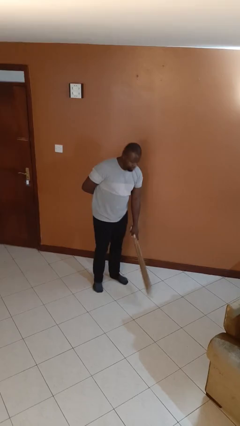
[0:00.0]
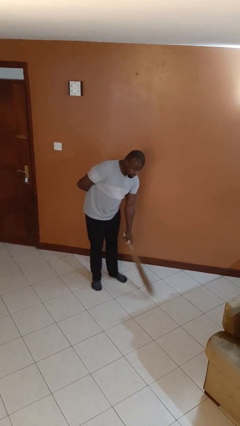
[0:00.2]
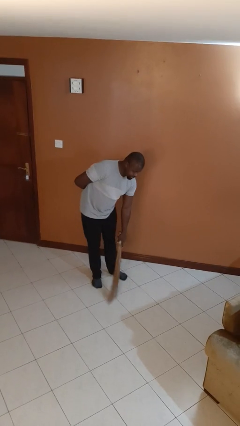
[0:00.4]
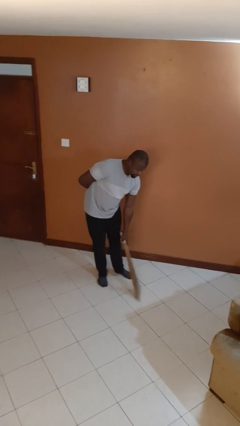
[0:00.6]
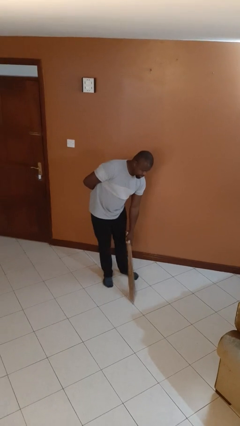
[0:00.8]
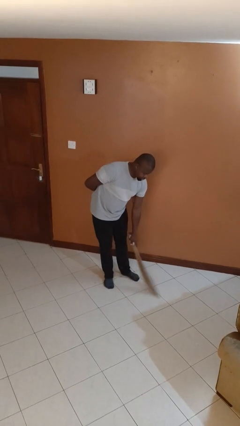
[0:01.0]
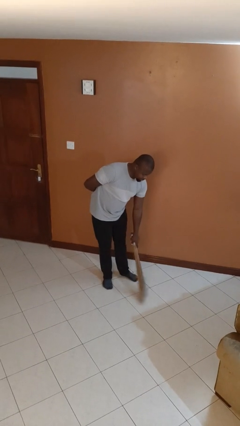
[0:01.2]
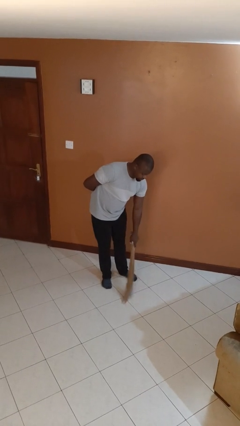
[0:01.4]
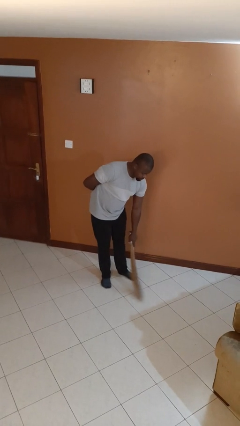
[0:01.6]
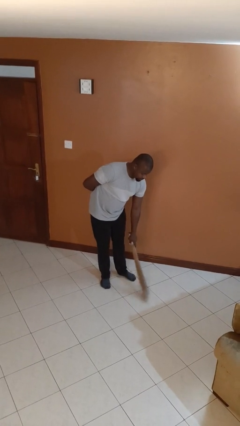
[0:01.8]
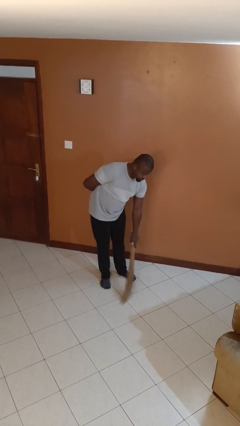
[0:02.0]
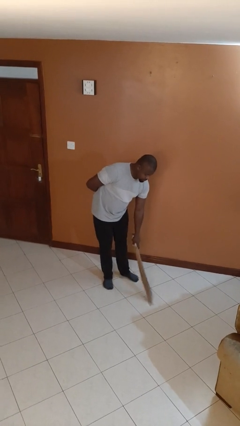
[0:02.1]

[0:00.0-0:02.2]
person sweeps floor

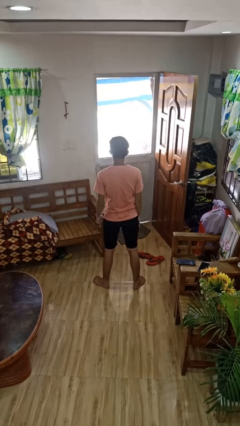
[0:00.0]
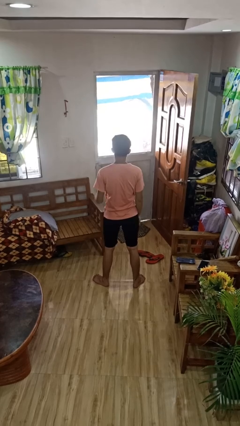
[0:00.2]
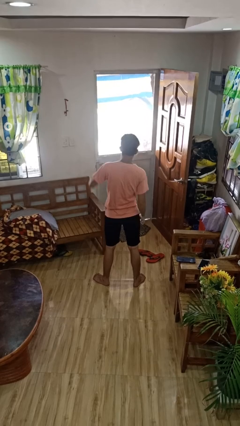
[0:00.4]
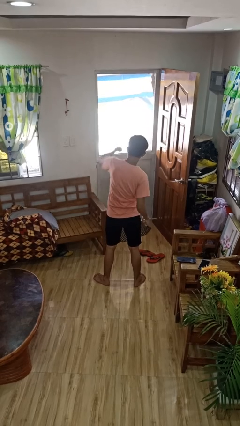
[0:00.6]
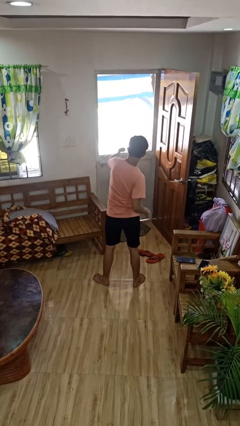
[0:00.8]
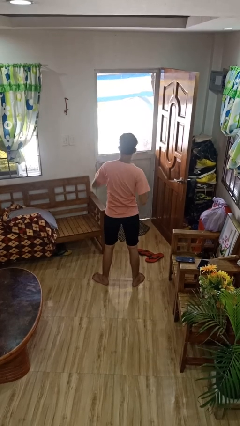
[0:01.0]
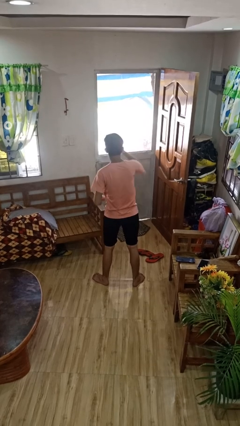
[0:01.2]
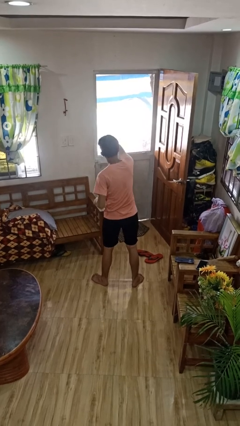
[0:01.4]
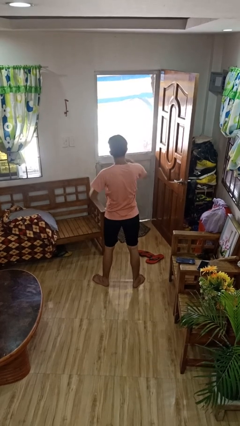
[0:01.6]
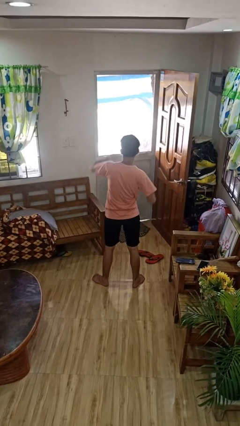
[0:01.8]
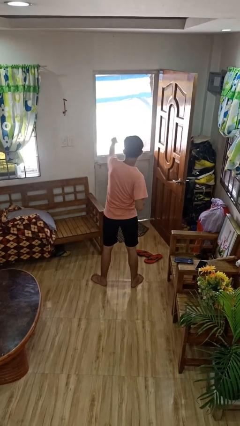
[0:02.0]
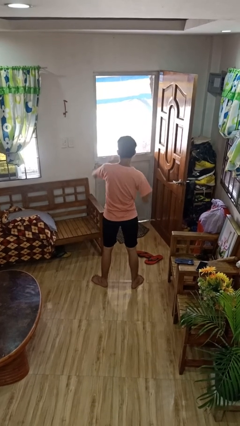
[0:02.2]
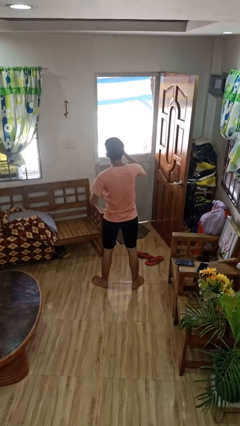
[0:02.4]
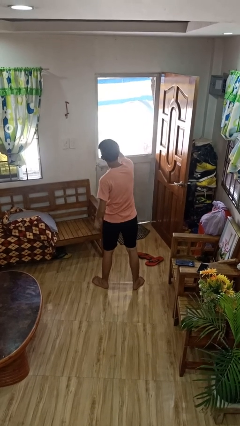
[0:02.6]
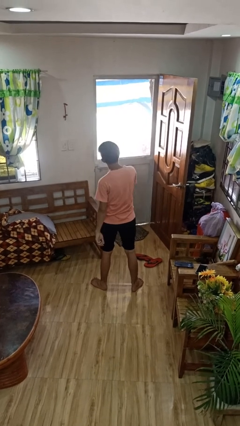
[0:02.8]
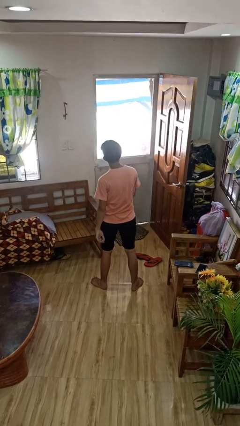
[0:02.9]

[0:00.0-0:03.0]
person punches

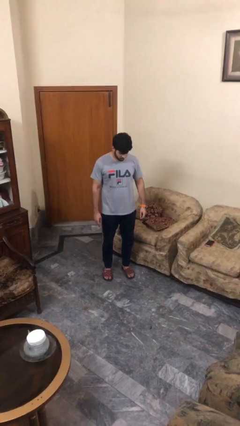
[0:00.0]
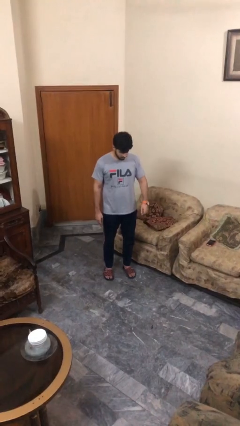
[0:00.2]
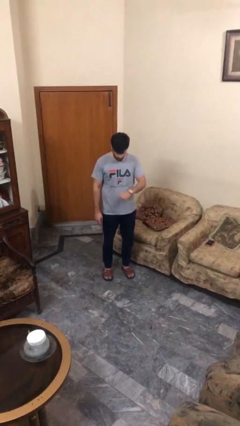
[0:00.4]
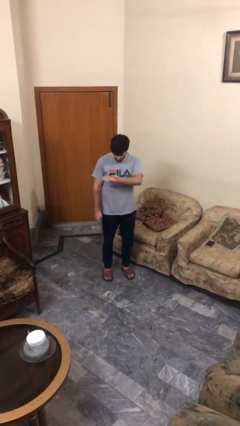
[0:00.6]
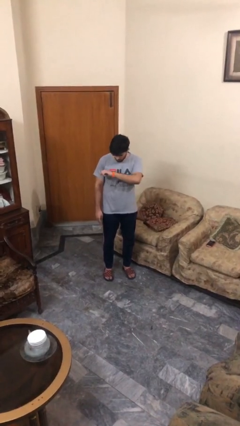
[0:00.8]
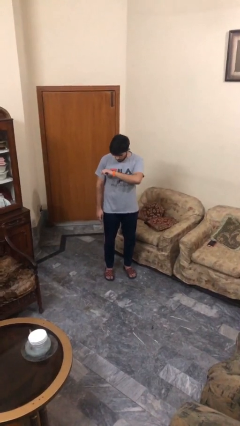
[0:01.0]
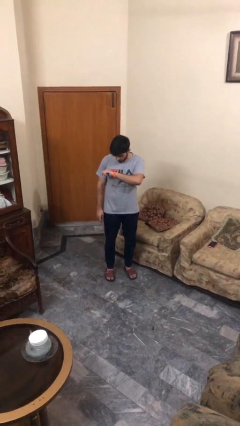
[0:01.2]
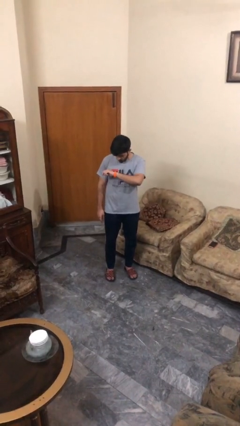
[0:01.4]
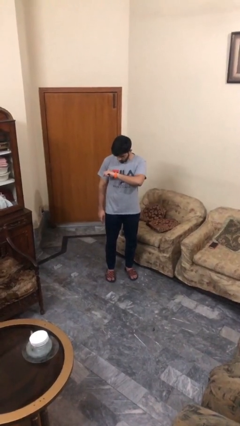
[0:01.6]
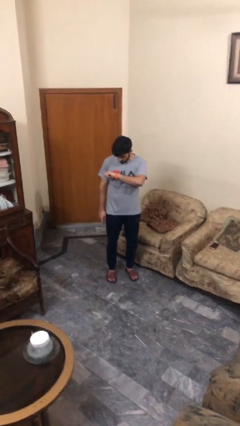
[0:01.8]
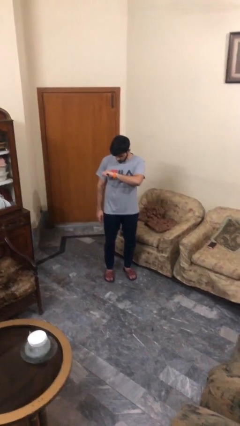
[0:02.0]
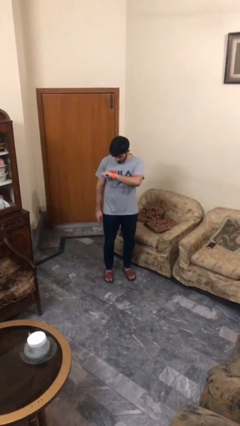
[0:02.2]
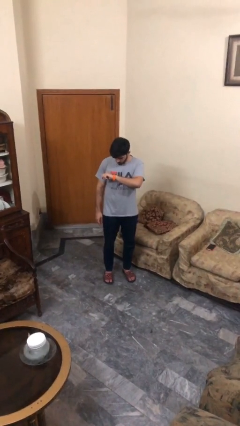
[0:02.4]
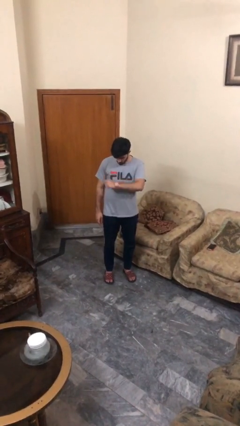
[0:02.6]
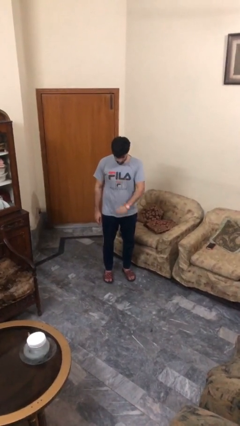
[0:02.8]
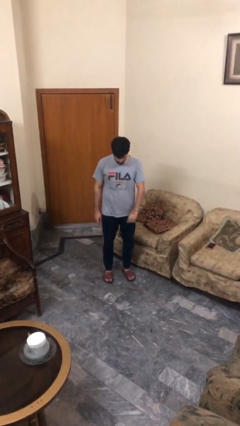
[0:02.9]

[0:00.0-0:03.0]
person looks at wristwatch

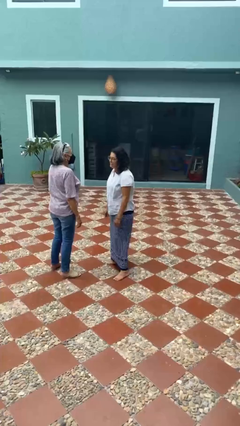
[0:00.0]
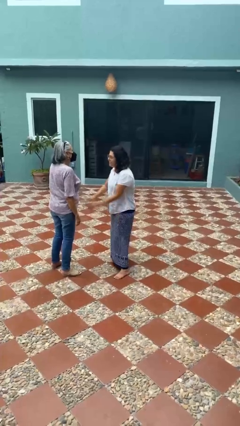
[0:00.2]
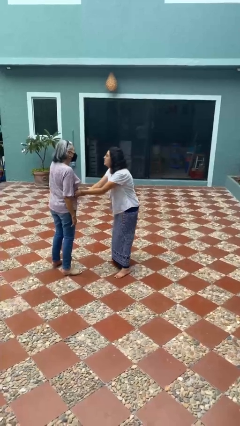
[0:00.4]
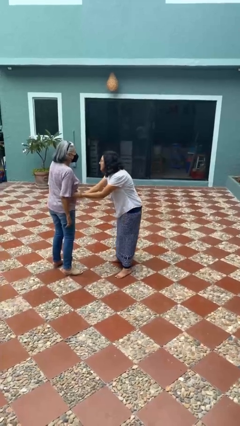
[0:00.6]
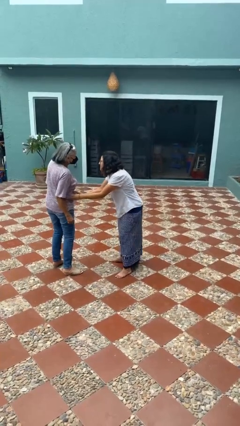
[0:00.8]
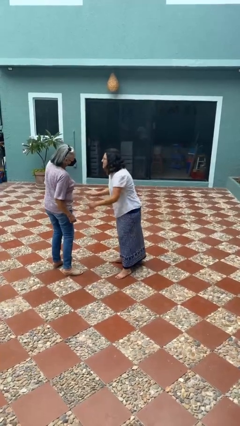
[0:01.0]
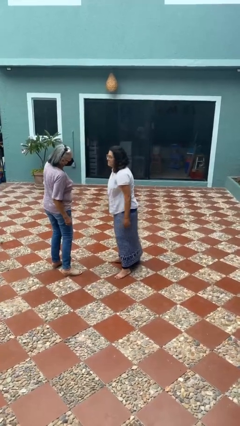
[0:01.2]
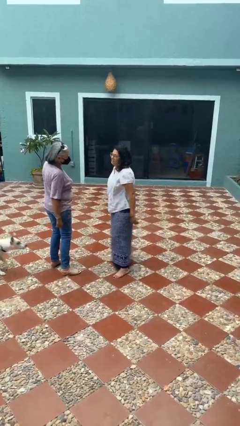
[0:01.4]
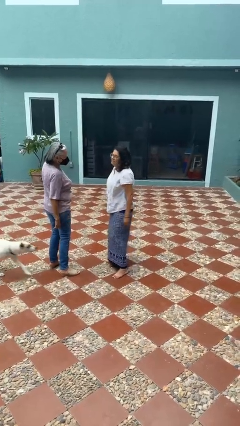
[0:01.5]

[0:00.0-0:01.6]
person tickles person

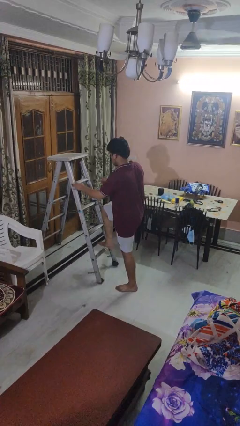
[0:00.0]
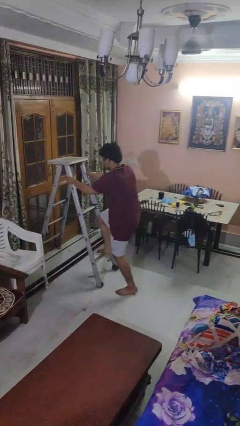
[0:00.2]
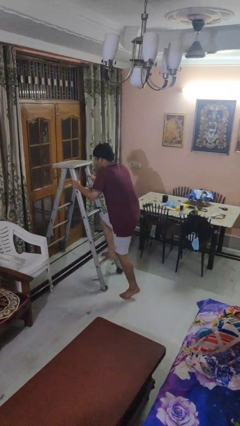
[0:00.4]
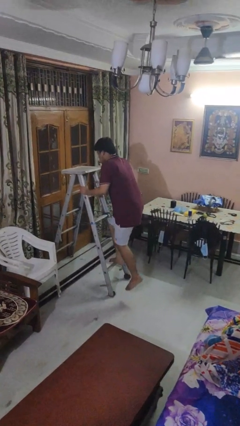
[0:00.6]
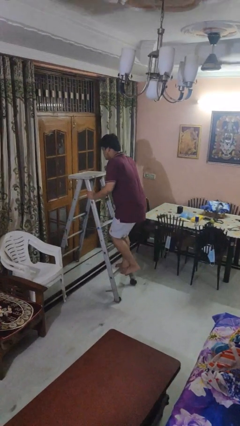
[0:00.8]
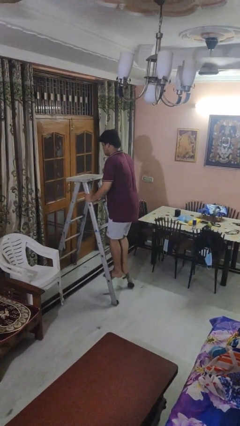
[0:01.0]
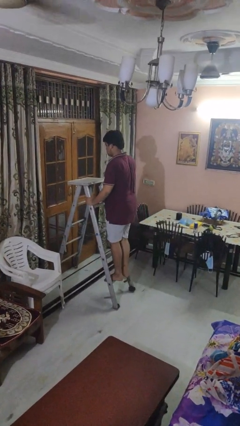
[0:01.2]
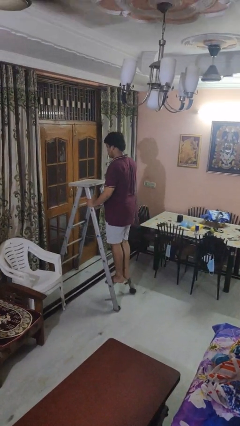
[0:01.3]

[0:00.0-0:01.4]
person climbs up ladder

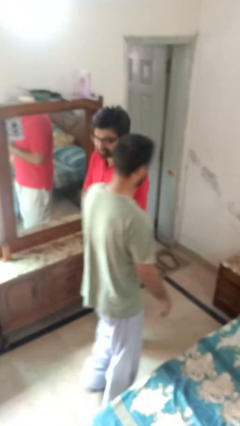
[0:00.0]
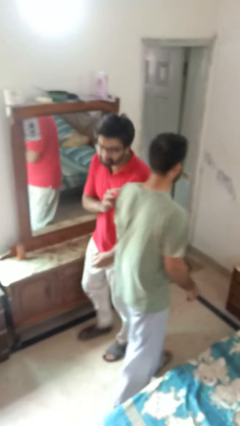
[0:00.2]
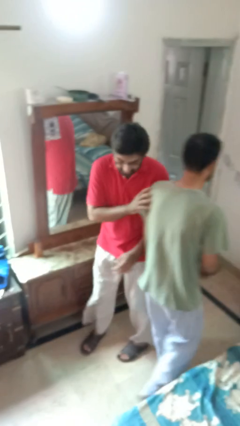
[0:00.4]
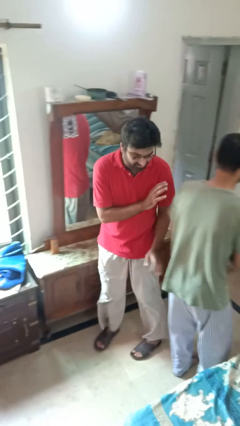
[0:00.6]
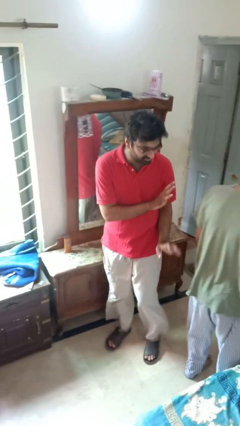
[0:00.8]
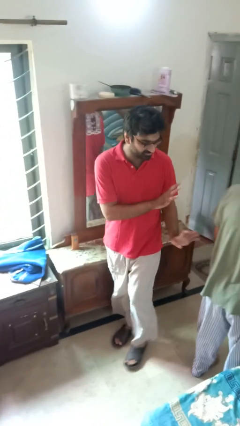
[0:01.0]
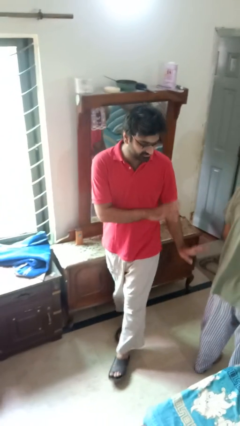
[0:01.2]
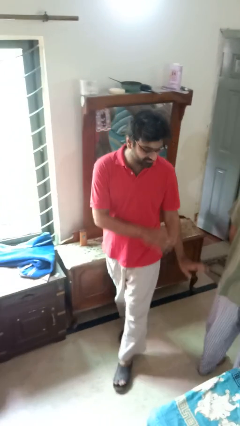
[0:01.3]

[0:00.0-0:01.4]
person bumps into person

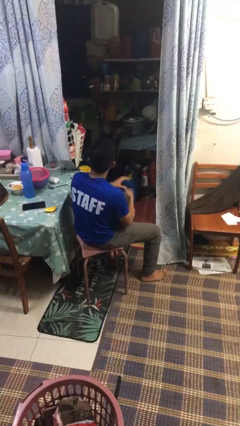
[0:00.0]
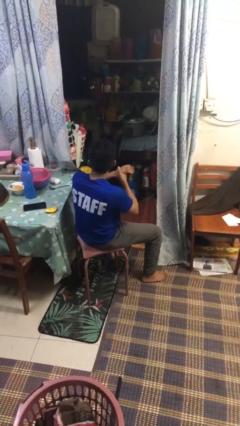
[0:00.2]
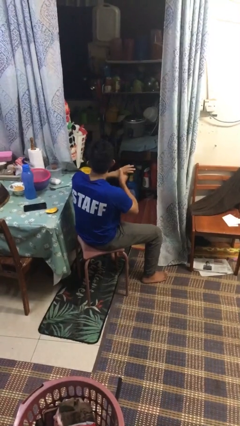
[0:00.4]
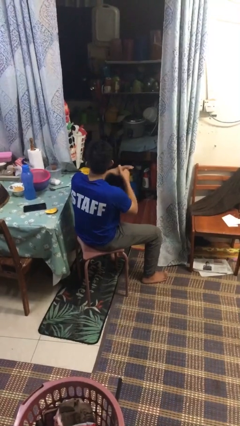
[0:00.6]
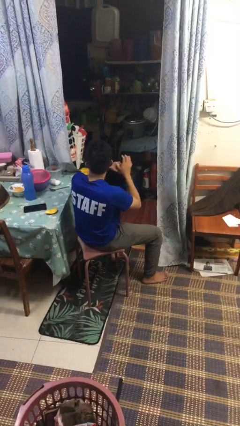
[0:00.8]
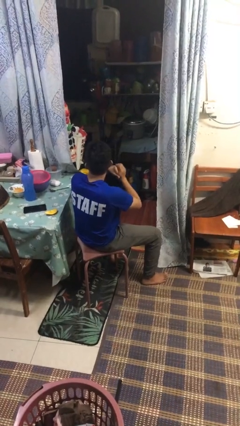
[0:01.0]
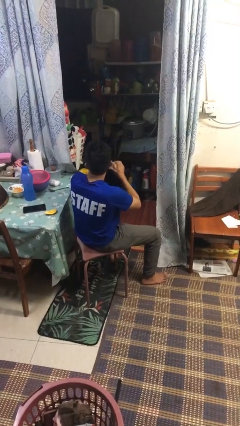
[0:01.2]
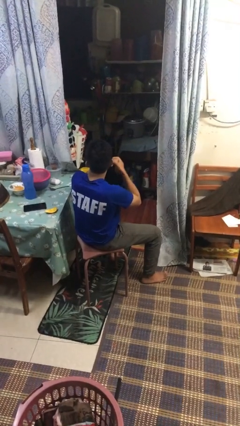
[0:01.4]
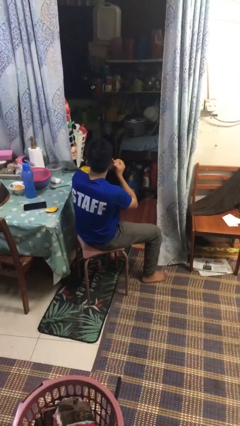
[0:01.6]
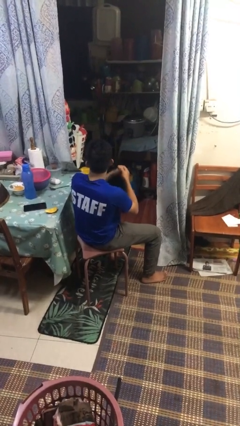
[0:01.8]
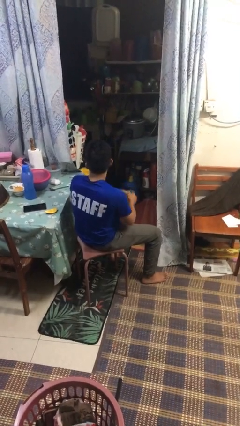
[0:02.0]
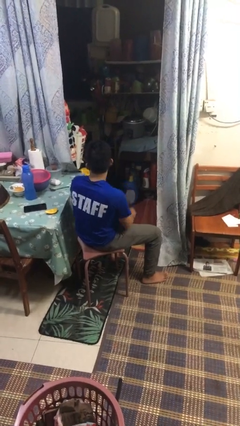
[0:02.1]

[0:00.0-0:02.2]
person cracks knuckles

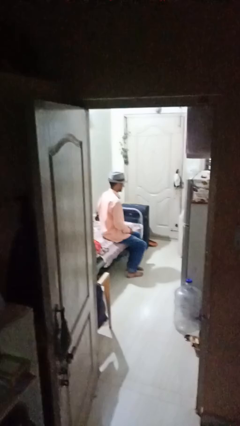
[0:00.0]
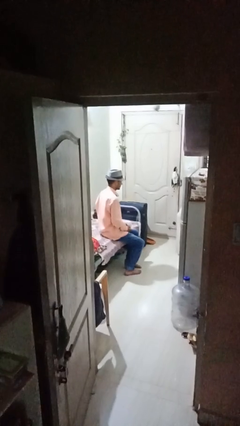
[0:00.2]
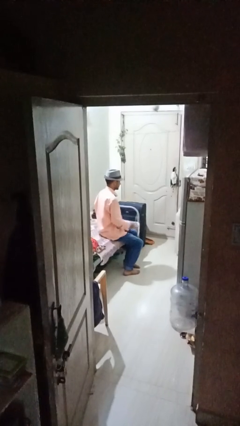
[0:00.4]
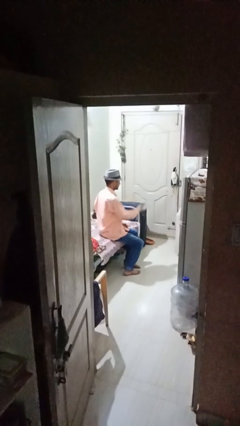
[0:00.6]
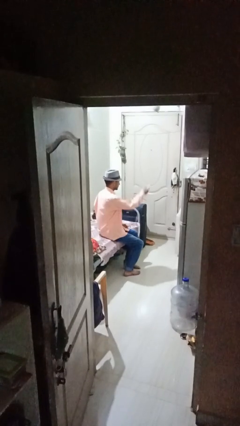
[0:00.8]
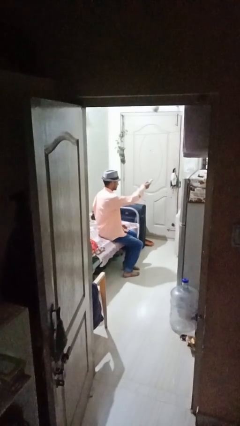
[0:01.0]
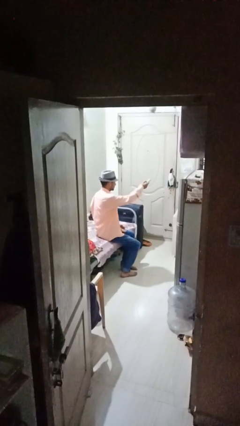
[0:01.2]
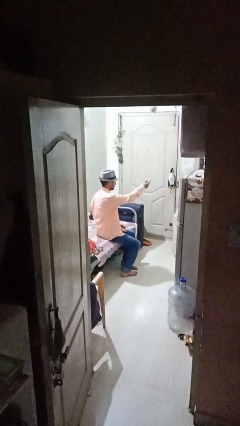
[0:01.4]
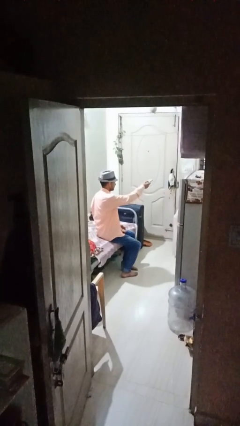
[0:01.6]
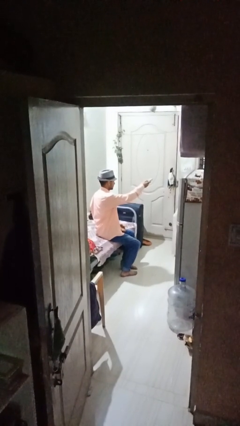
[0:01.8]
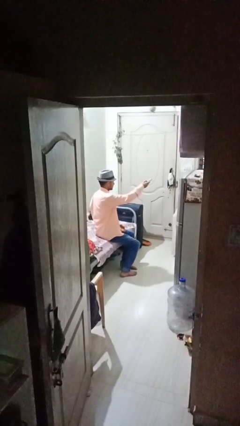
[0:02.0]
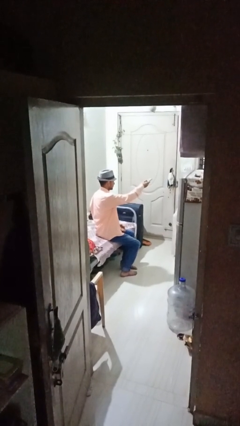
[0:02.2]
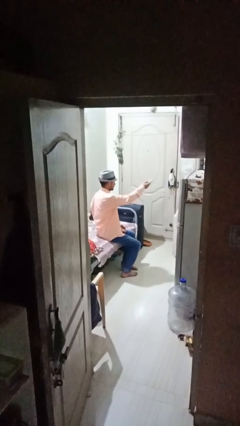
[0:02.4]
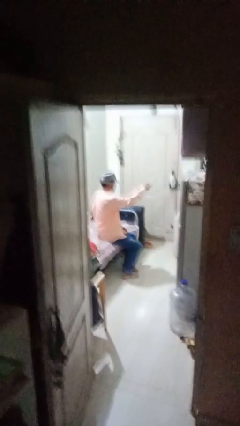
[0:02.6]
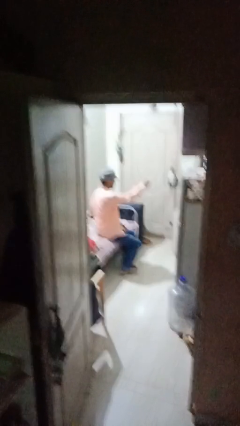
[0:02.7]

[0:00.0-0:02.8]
person uses television remote
